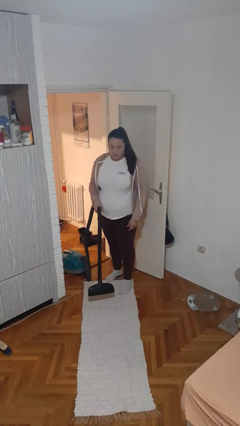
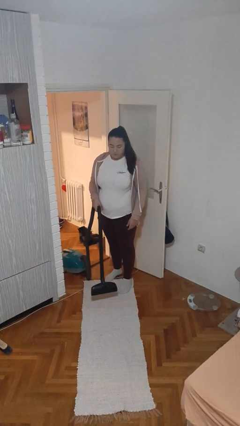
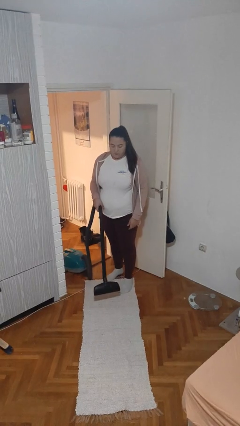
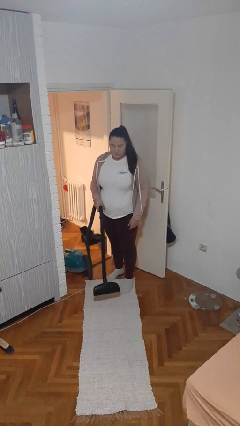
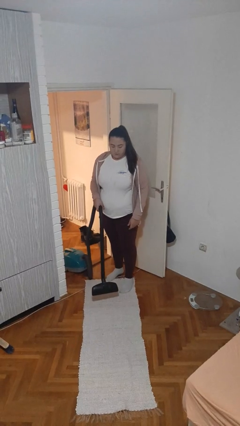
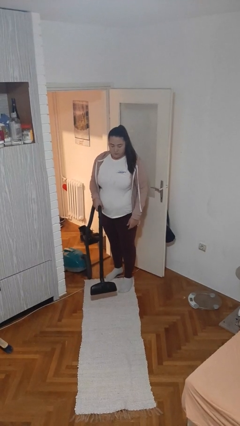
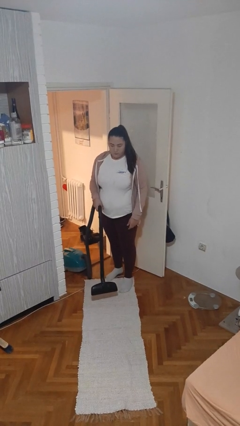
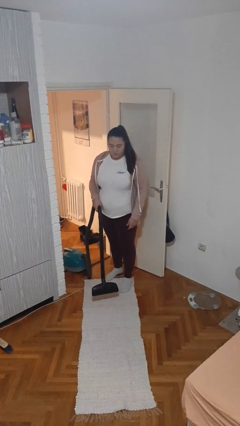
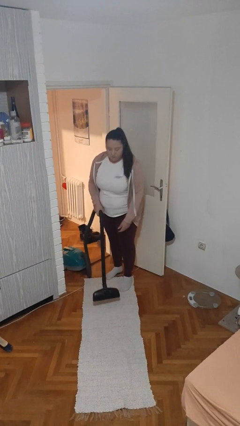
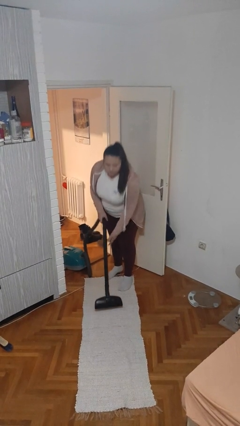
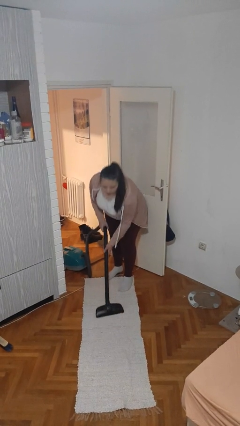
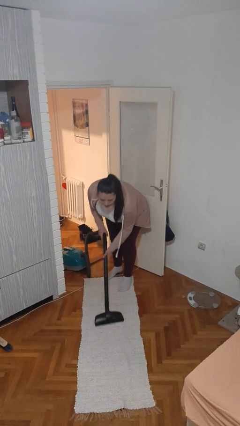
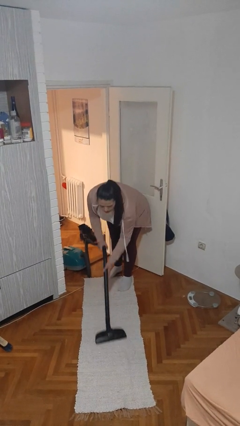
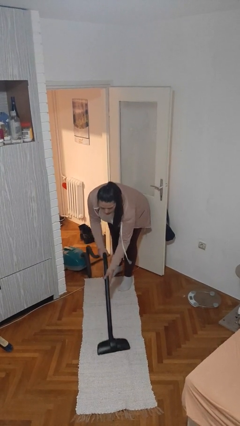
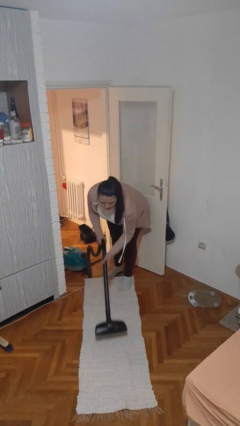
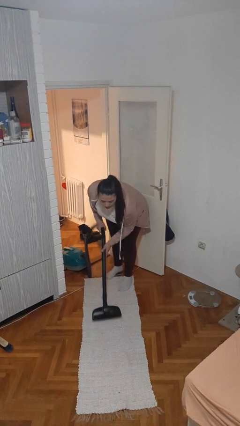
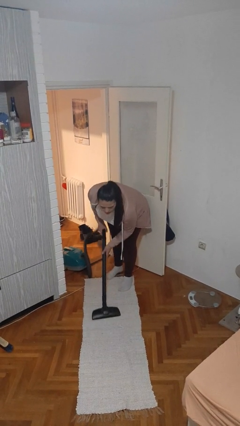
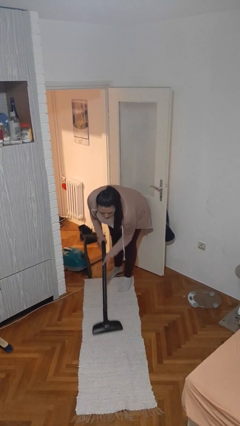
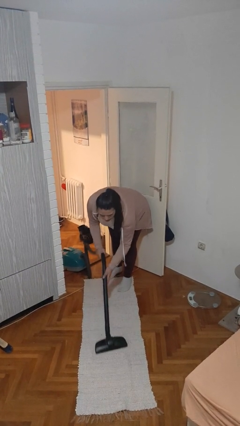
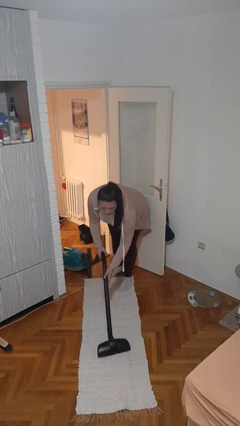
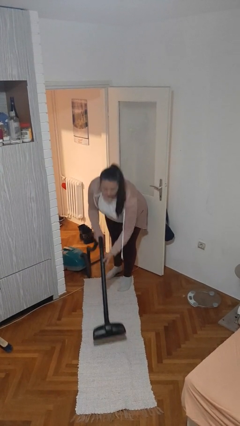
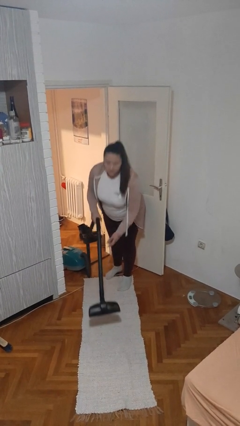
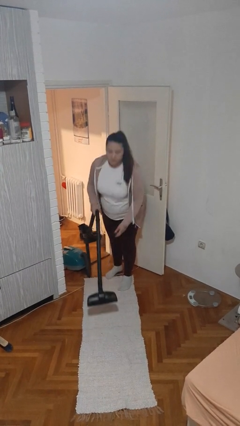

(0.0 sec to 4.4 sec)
person vacuums carpet

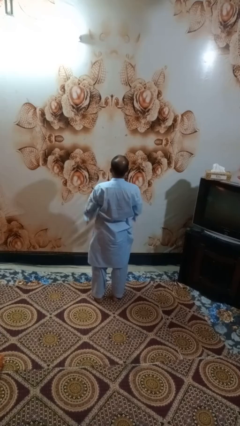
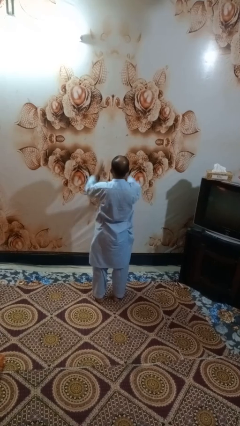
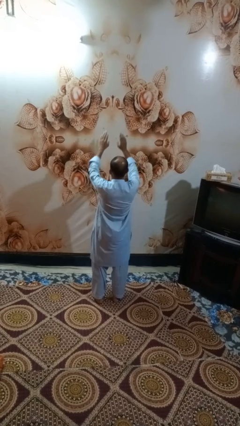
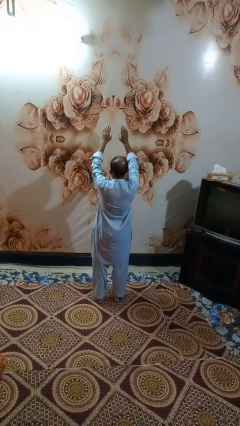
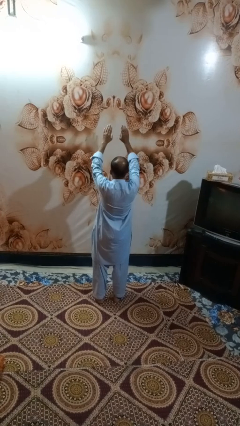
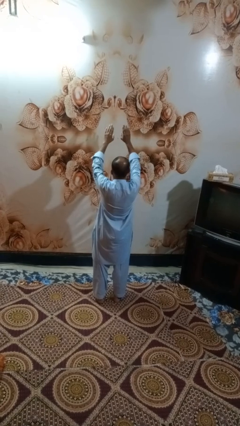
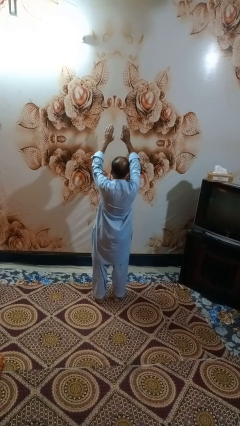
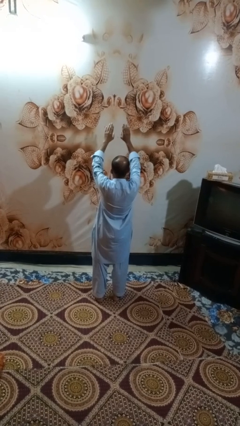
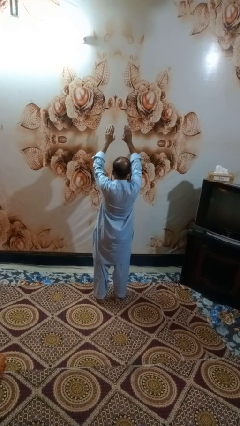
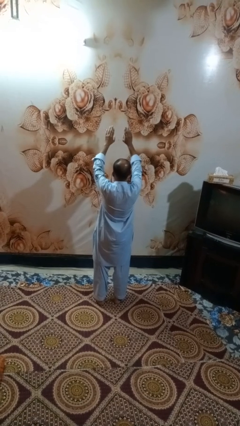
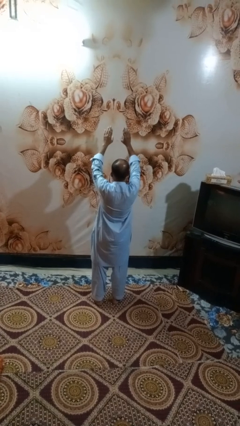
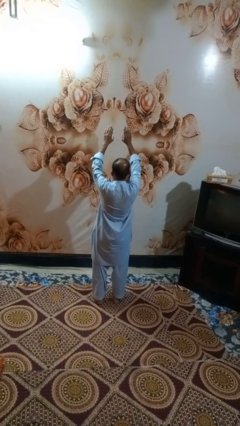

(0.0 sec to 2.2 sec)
person gestures swipe up

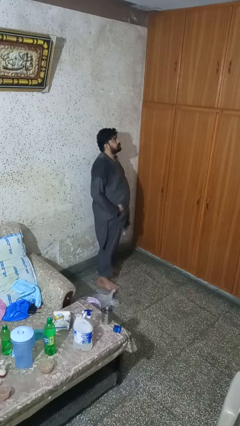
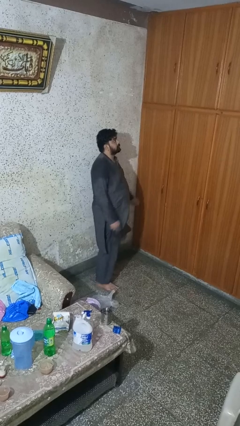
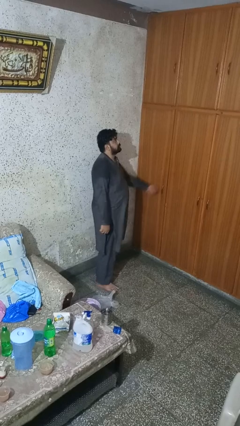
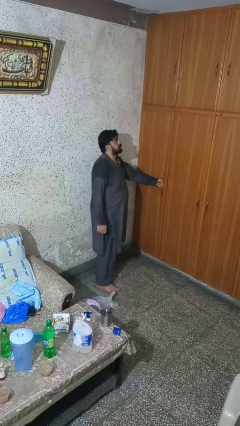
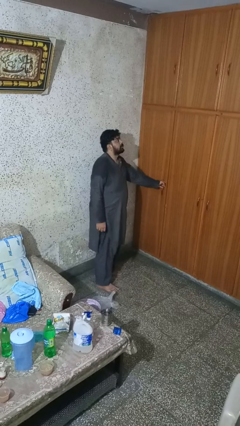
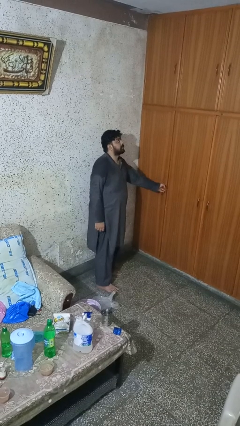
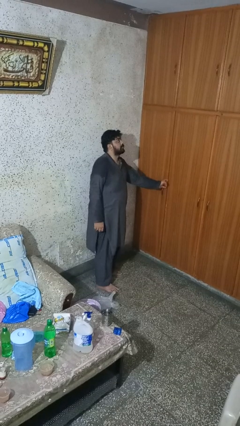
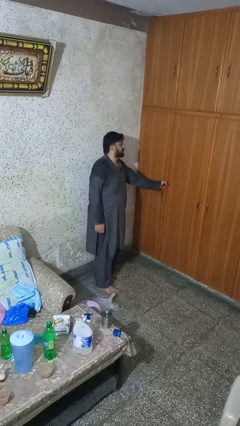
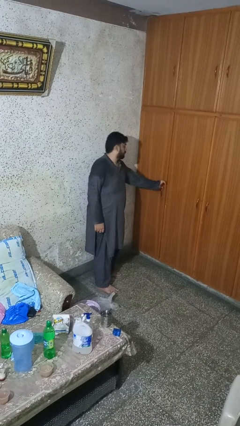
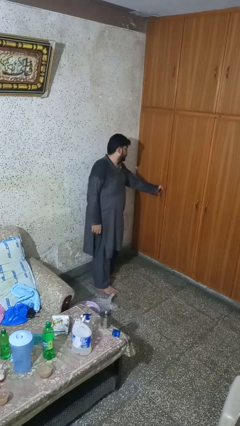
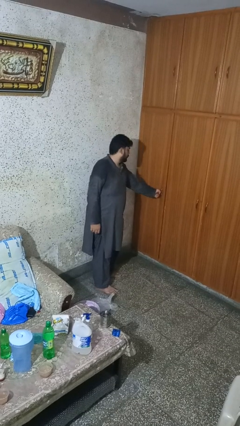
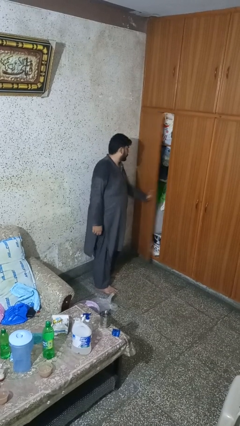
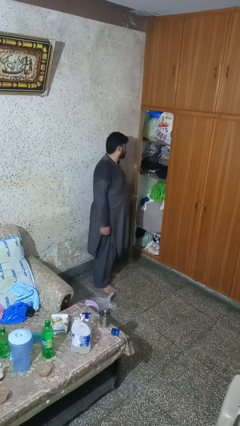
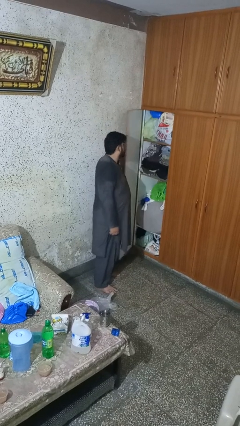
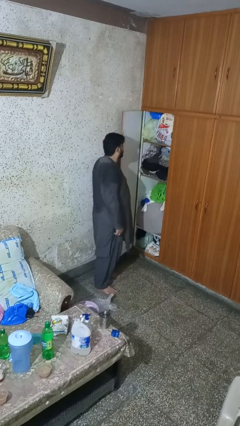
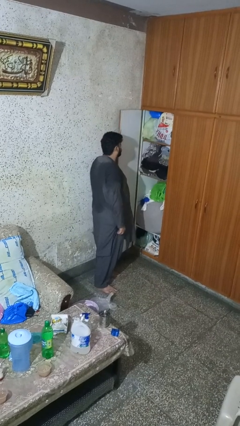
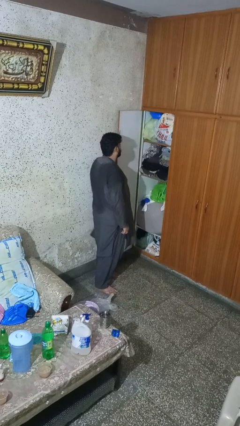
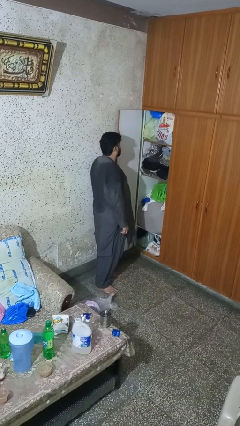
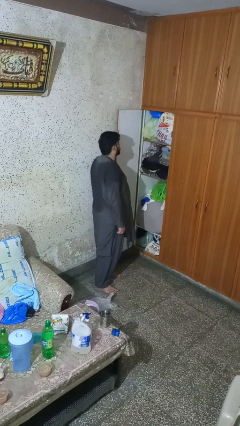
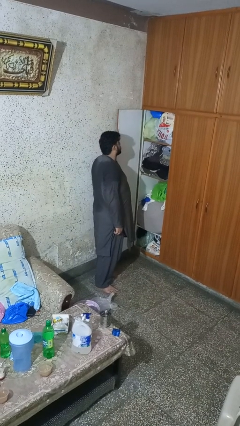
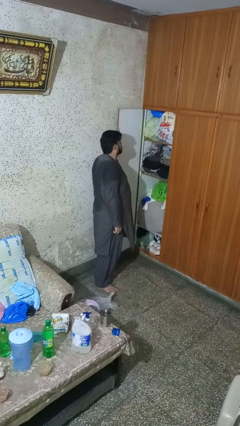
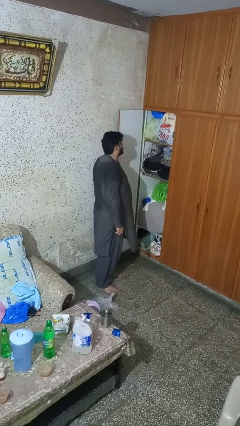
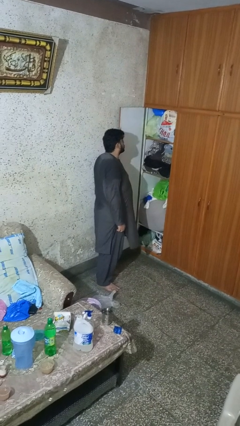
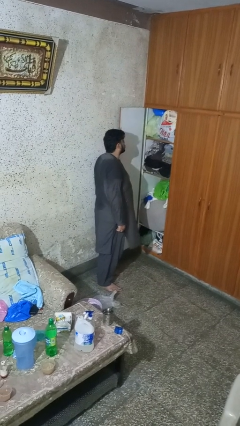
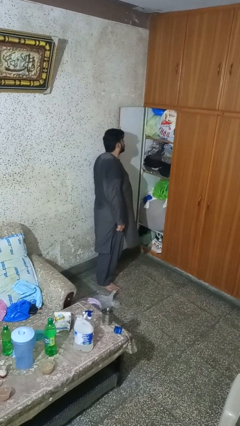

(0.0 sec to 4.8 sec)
person opens closet door

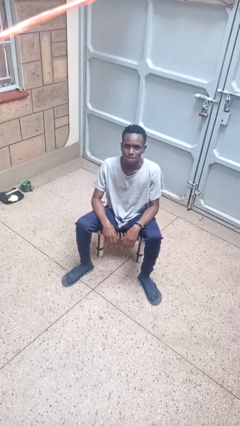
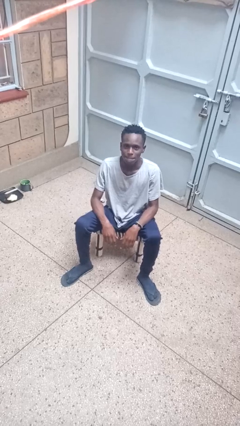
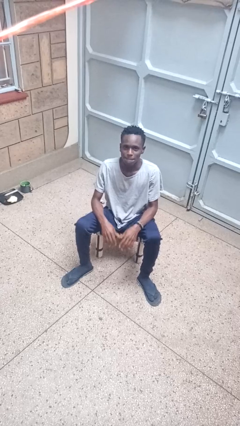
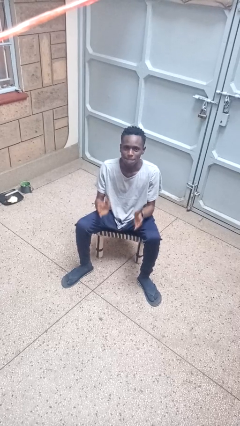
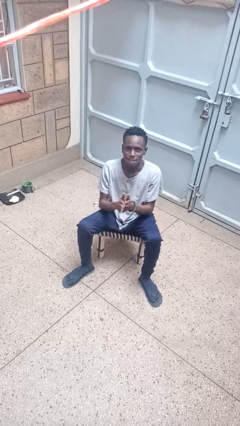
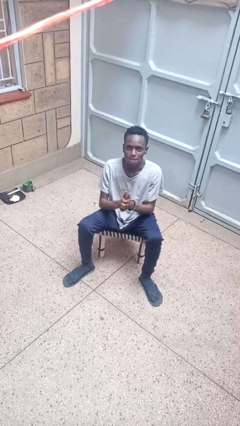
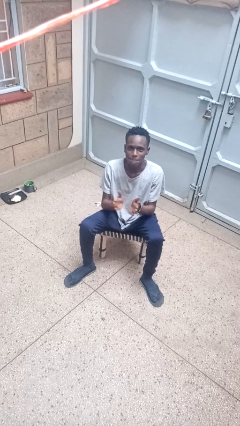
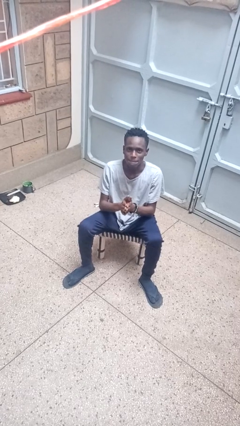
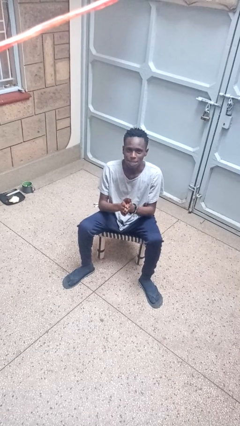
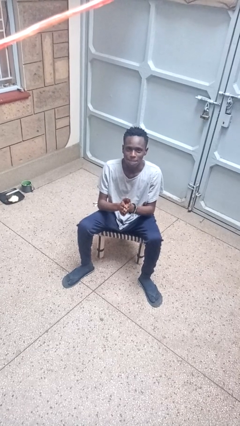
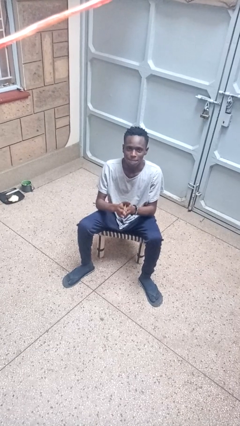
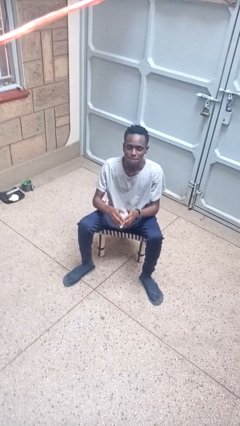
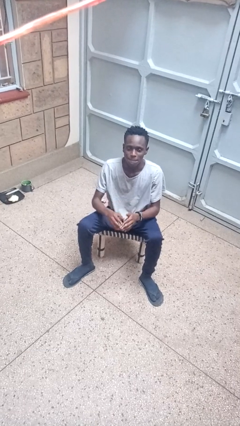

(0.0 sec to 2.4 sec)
person claps hands

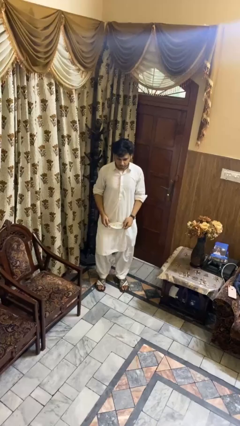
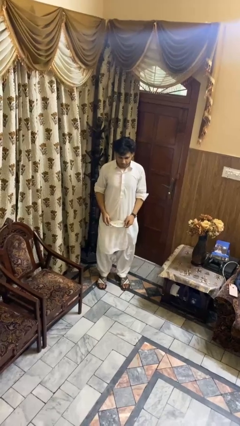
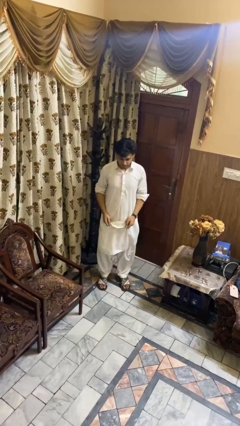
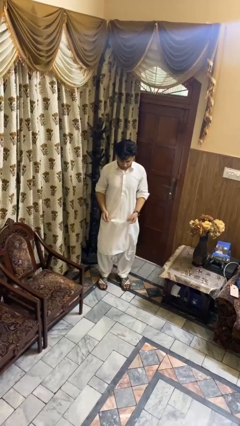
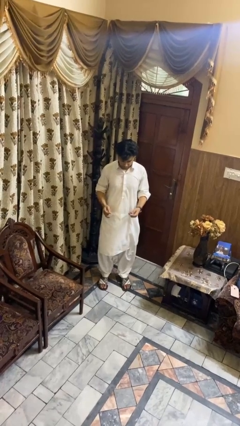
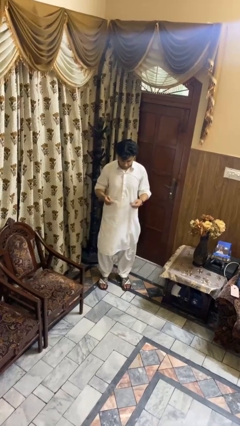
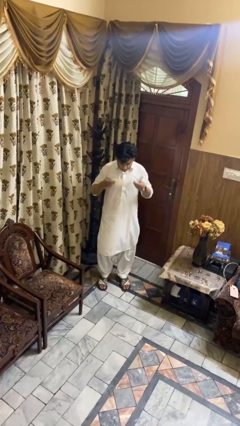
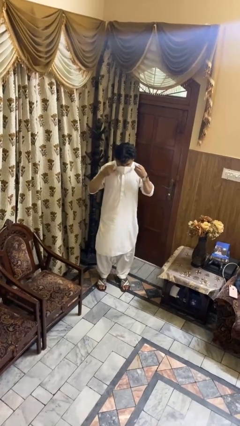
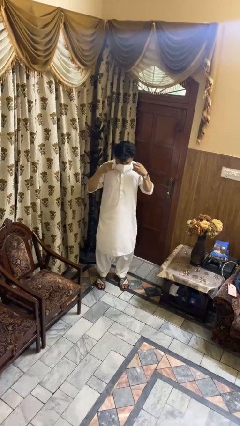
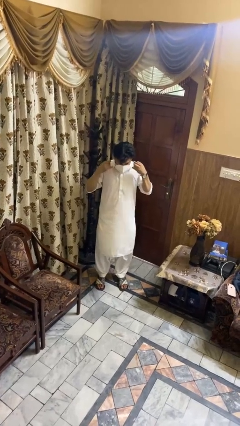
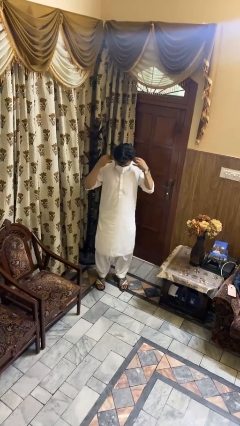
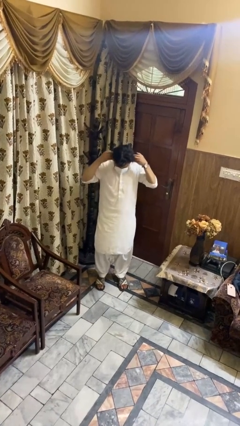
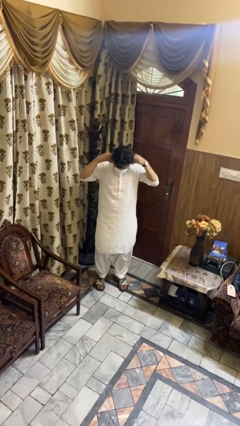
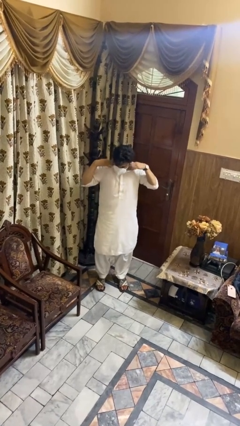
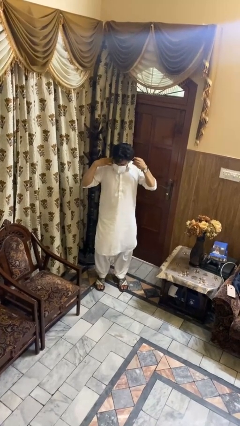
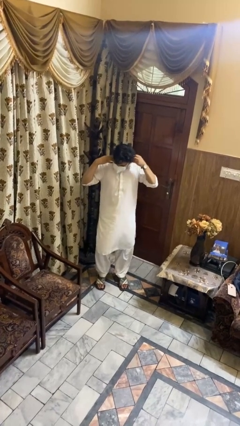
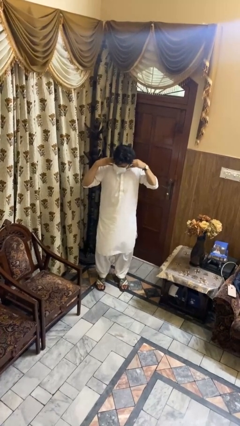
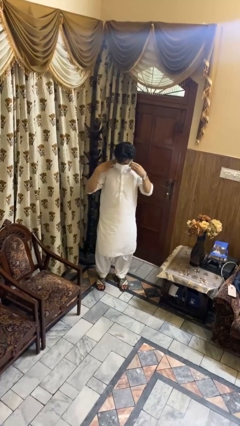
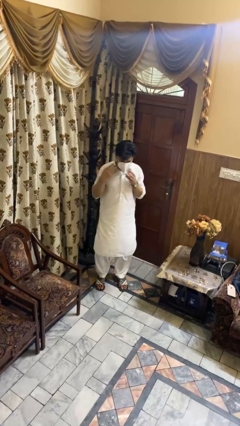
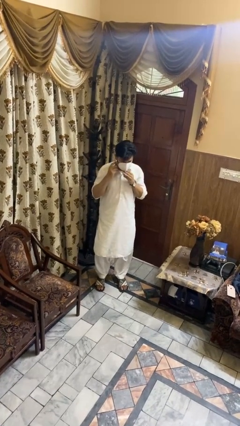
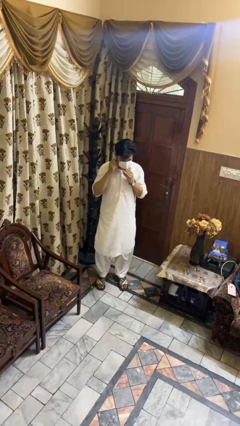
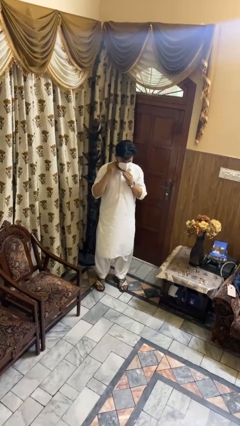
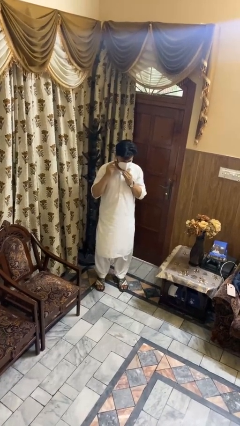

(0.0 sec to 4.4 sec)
person puts on facemask
